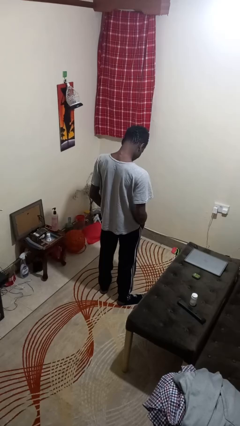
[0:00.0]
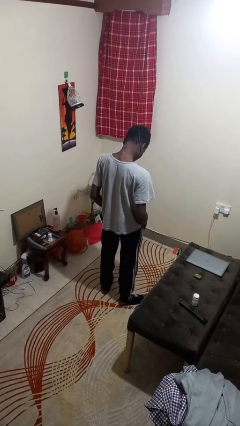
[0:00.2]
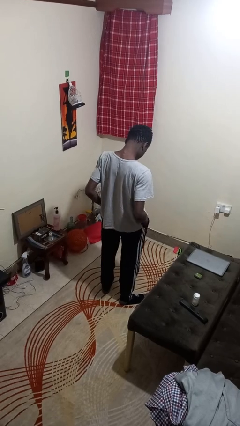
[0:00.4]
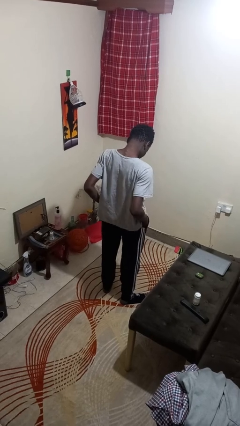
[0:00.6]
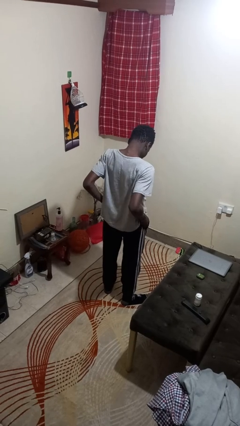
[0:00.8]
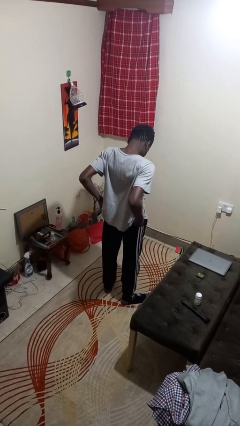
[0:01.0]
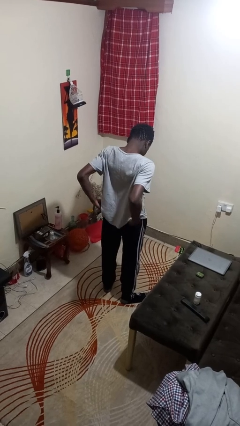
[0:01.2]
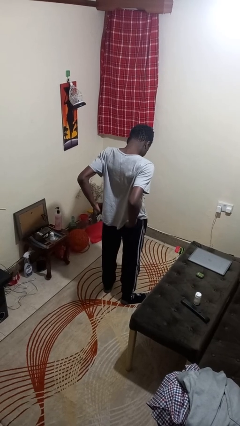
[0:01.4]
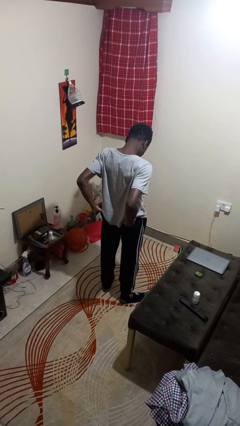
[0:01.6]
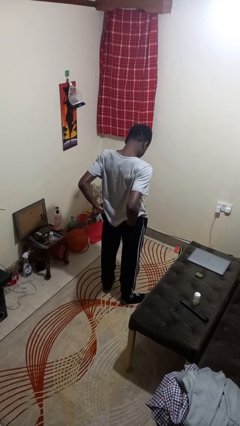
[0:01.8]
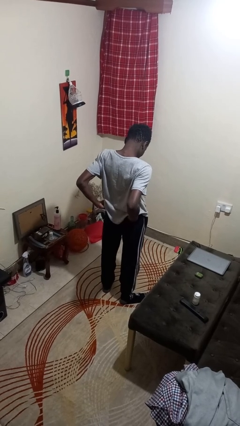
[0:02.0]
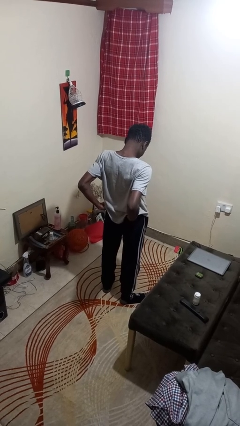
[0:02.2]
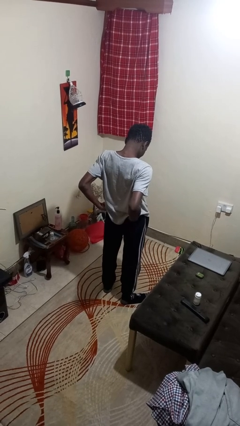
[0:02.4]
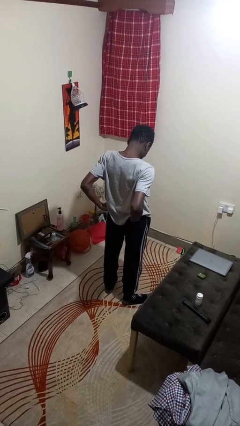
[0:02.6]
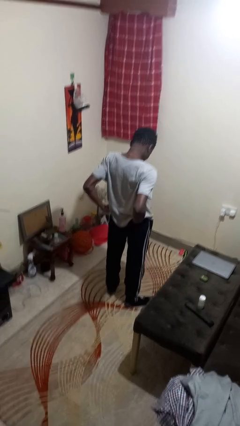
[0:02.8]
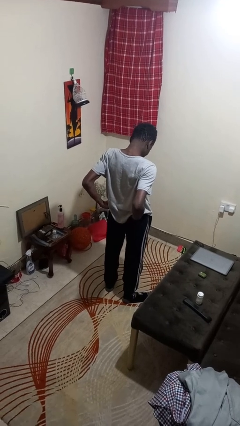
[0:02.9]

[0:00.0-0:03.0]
person puts hands in back pockets

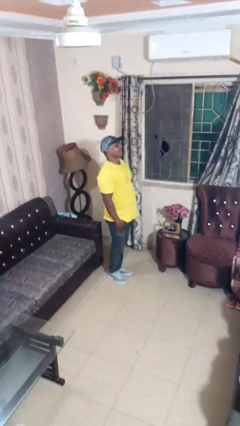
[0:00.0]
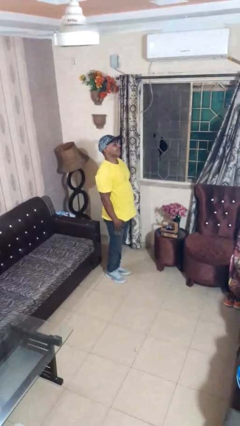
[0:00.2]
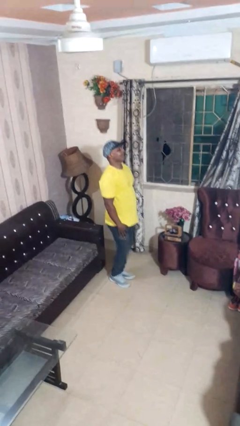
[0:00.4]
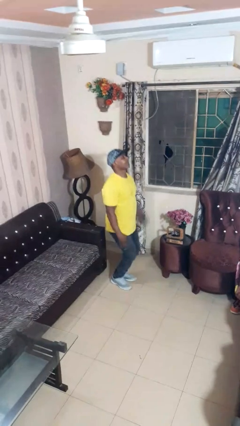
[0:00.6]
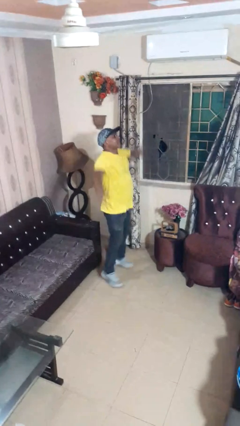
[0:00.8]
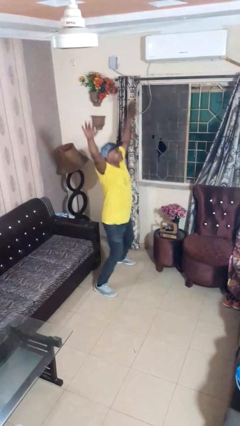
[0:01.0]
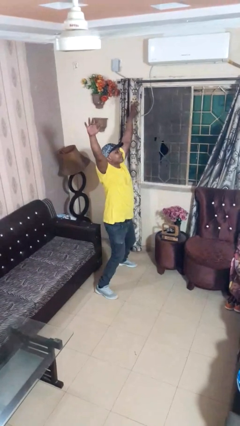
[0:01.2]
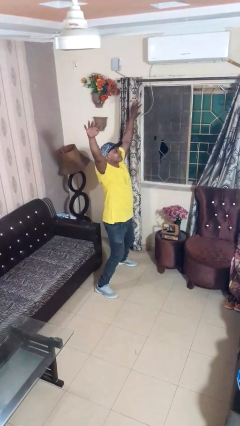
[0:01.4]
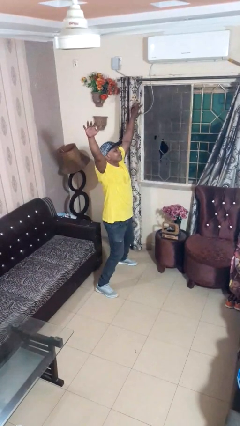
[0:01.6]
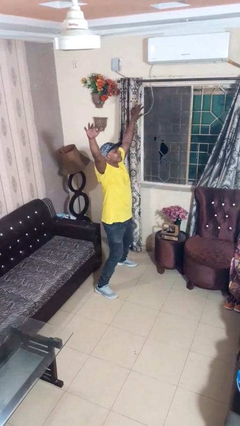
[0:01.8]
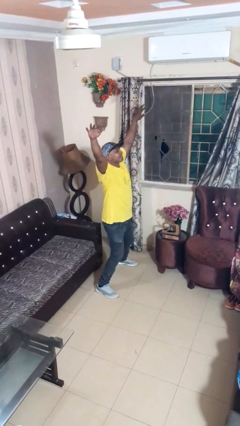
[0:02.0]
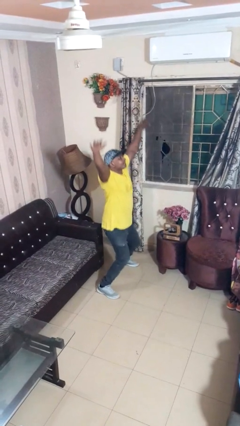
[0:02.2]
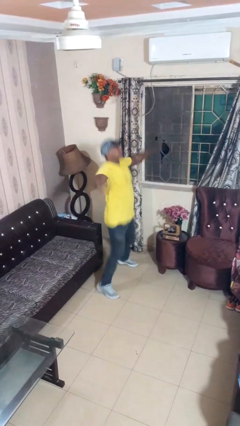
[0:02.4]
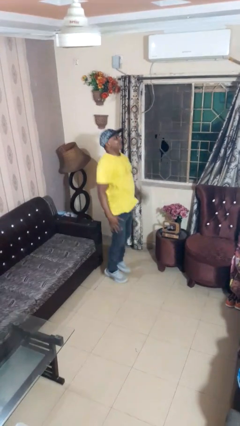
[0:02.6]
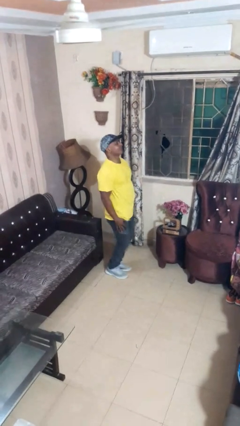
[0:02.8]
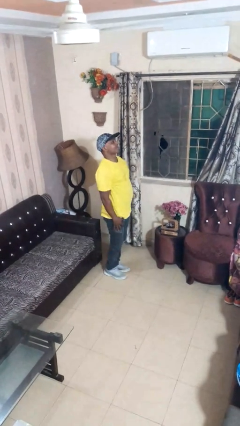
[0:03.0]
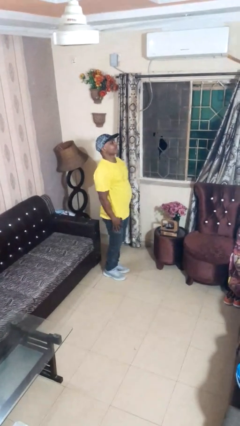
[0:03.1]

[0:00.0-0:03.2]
person exercises with jumping jacks

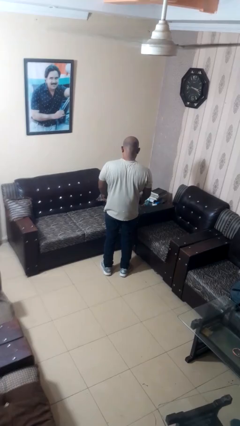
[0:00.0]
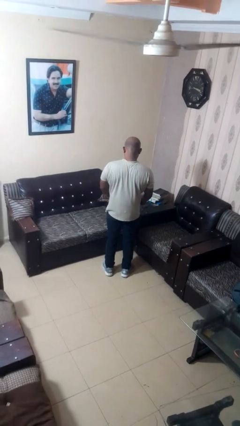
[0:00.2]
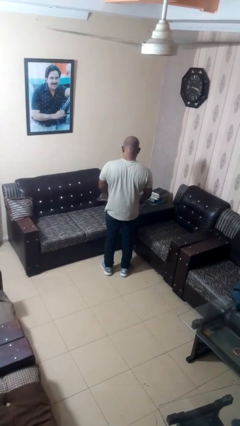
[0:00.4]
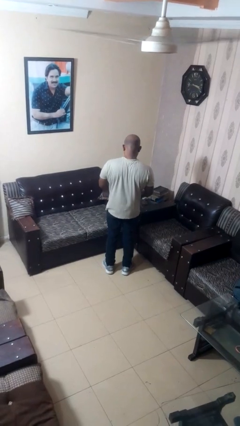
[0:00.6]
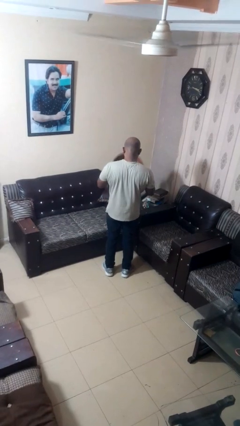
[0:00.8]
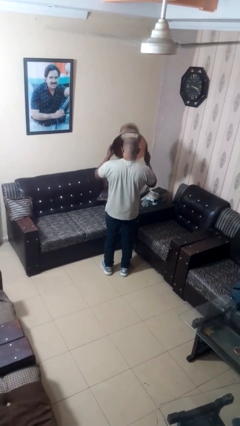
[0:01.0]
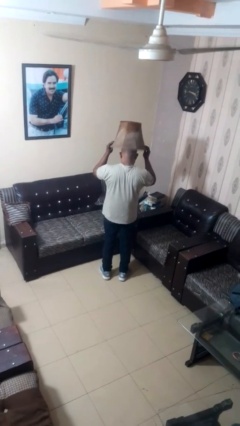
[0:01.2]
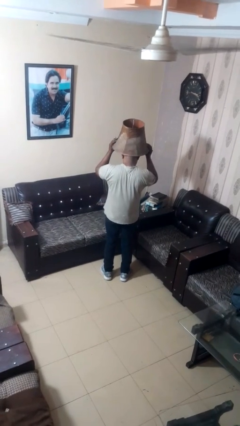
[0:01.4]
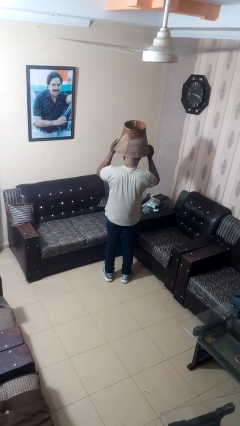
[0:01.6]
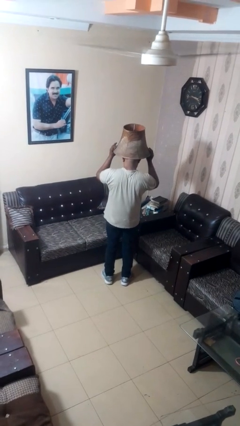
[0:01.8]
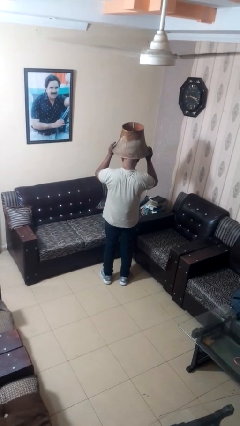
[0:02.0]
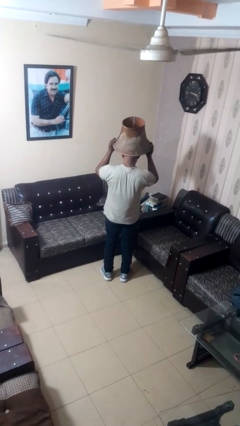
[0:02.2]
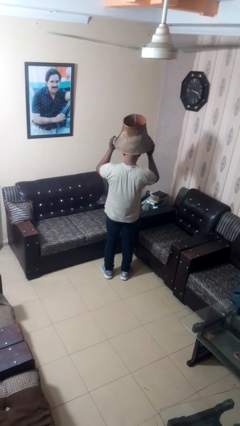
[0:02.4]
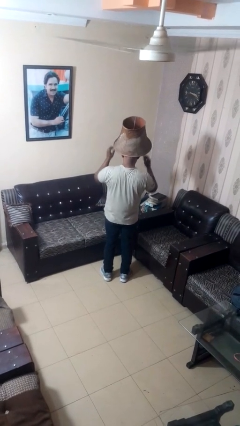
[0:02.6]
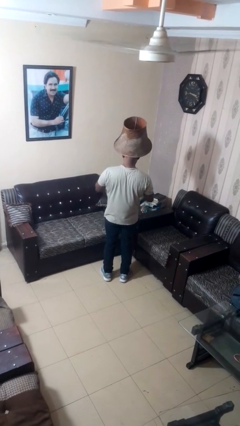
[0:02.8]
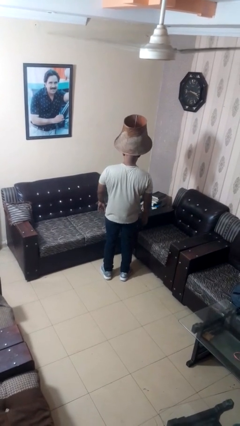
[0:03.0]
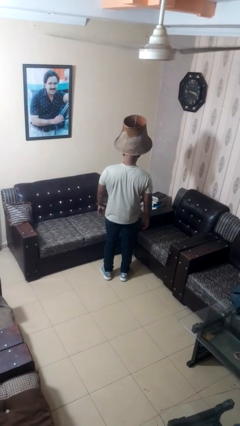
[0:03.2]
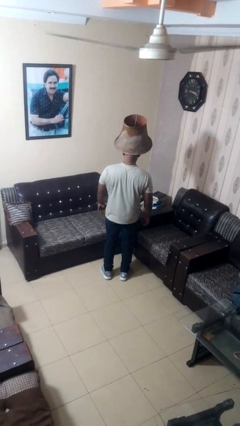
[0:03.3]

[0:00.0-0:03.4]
person puts on hat

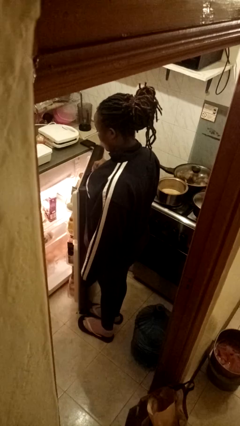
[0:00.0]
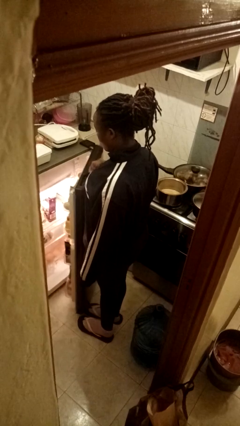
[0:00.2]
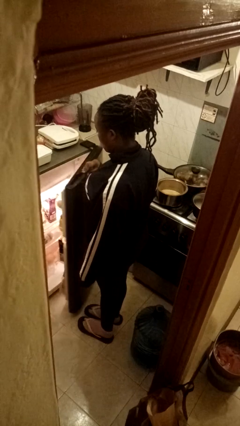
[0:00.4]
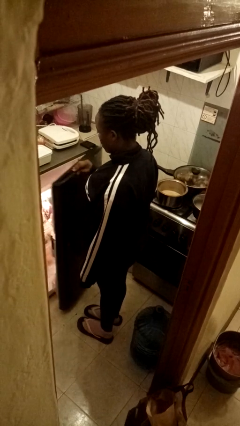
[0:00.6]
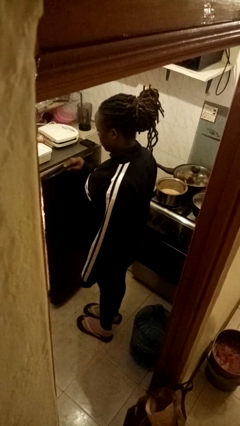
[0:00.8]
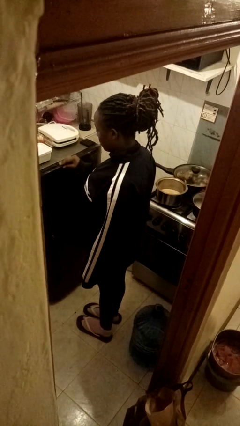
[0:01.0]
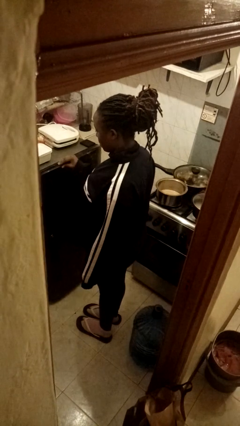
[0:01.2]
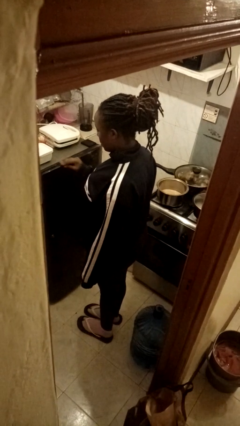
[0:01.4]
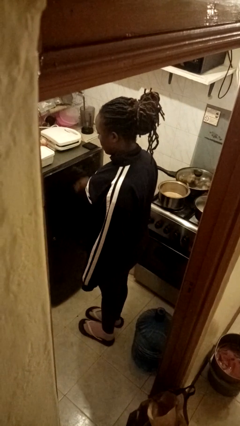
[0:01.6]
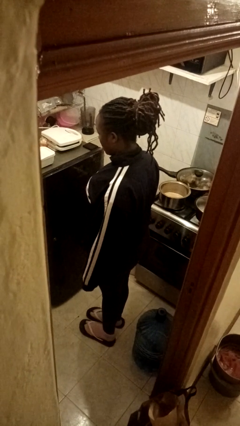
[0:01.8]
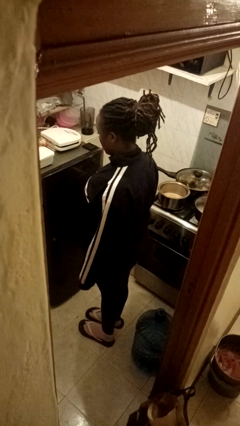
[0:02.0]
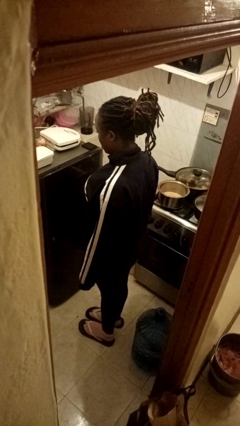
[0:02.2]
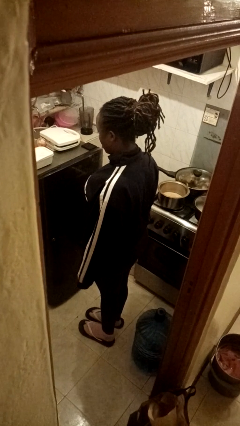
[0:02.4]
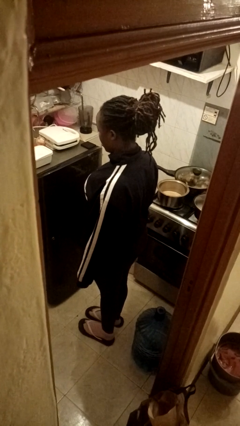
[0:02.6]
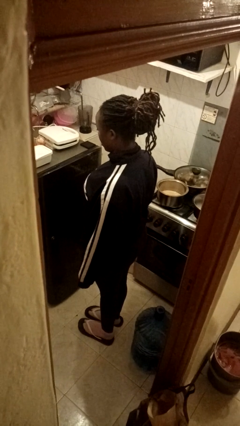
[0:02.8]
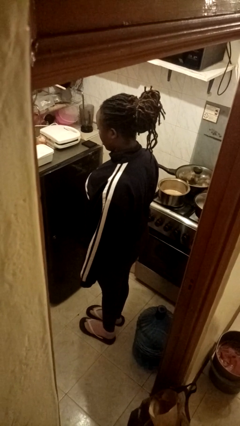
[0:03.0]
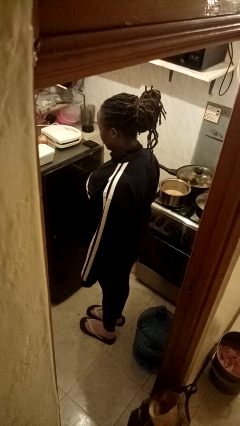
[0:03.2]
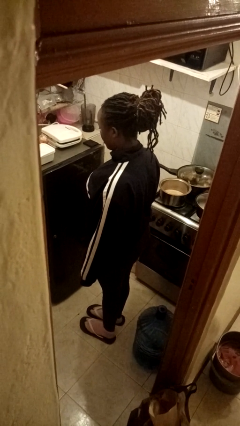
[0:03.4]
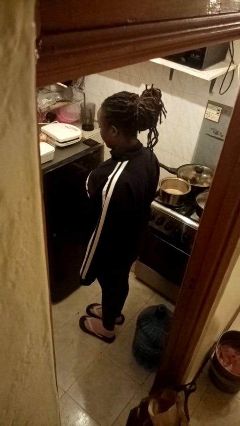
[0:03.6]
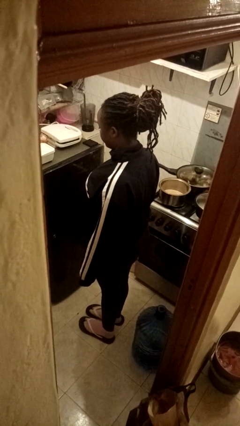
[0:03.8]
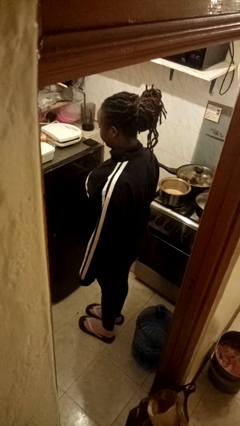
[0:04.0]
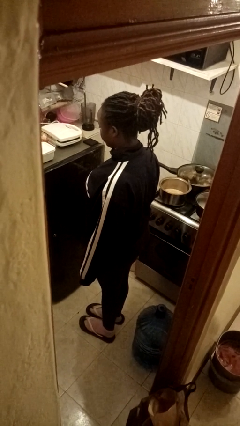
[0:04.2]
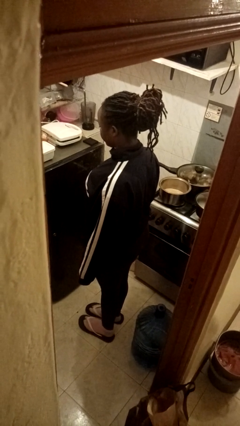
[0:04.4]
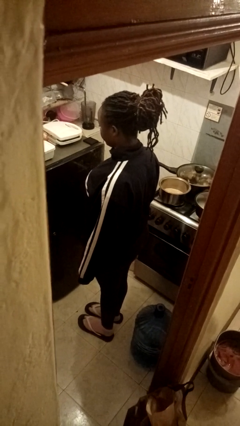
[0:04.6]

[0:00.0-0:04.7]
person closes refrigerator

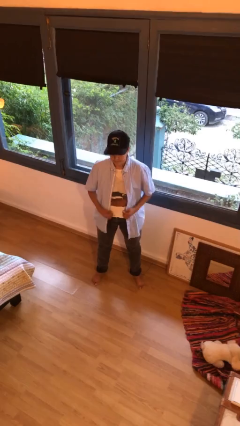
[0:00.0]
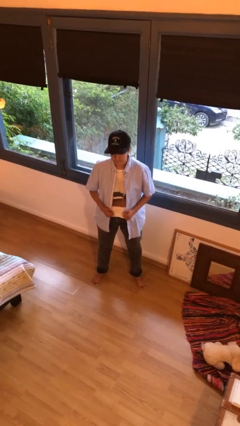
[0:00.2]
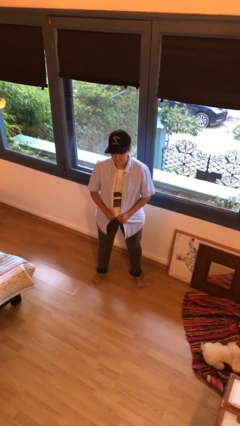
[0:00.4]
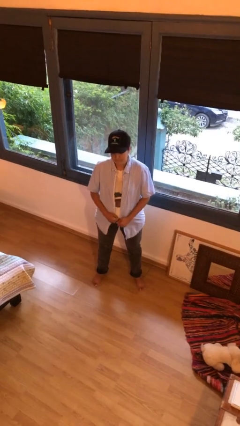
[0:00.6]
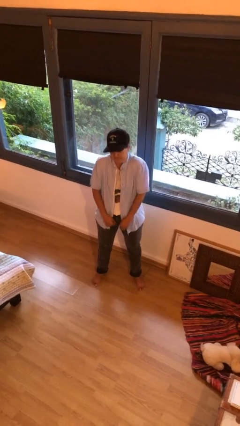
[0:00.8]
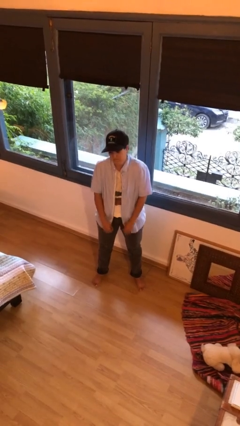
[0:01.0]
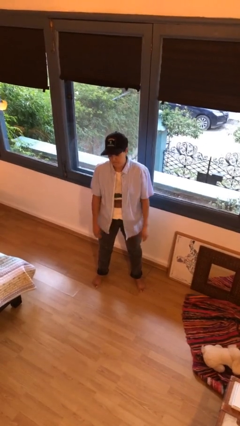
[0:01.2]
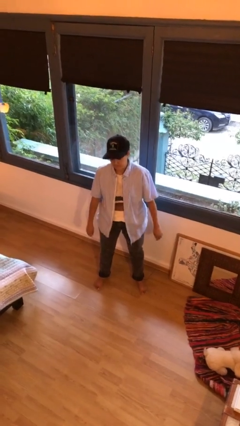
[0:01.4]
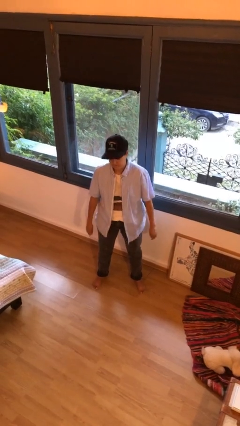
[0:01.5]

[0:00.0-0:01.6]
person shrugs

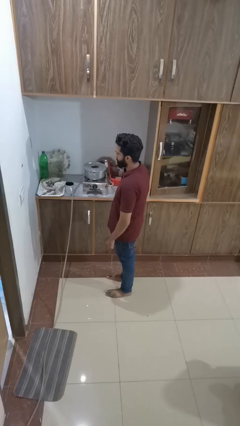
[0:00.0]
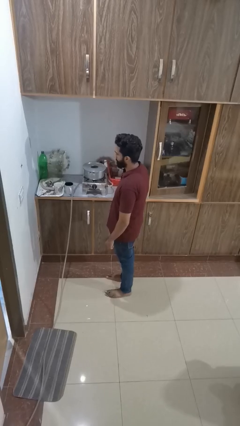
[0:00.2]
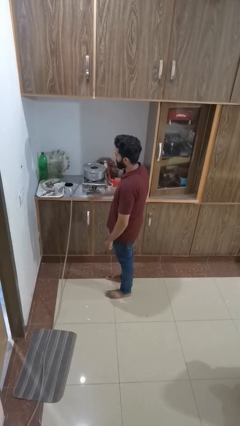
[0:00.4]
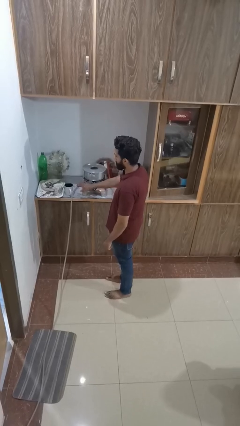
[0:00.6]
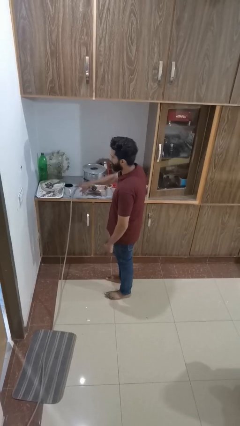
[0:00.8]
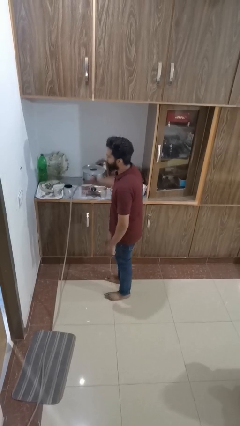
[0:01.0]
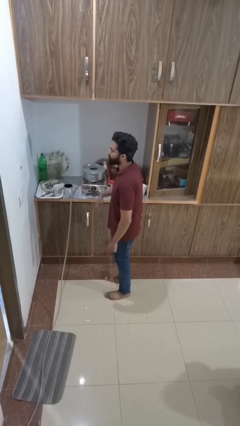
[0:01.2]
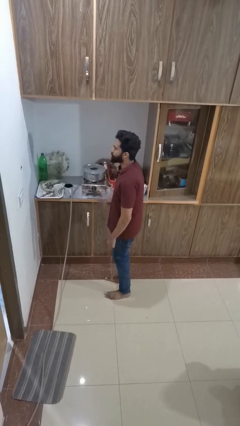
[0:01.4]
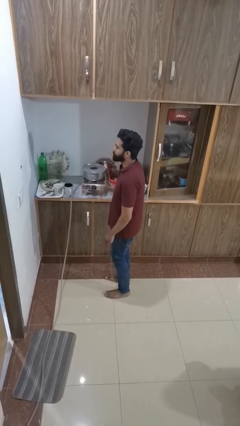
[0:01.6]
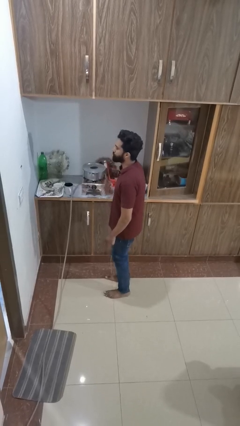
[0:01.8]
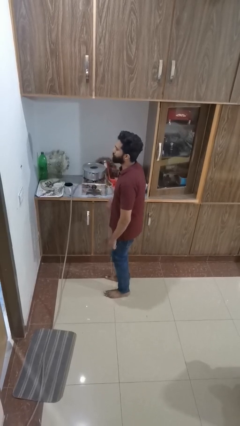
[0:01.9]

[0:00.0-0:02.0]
person burns hand
